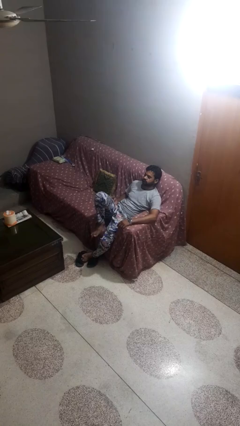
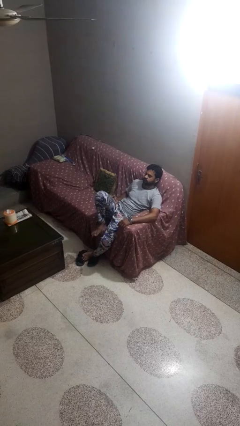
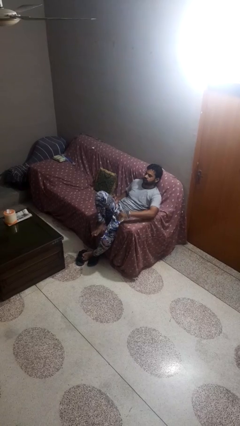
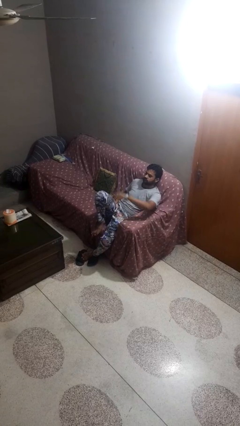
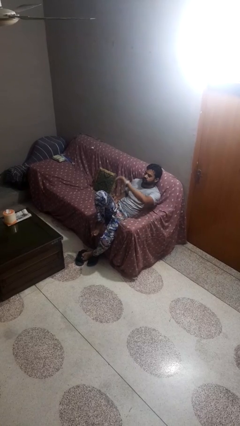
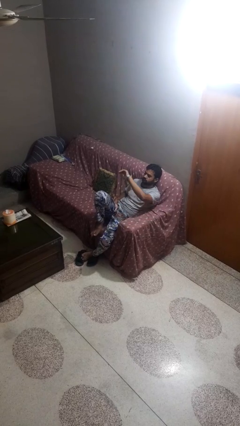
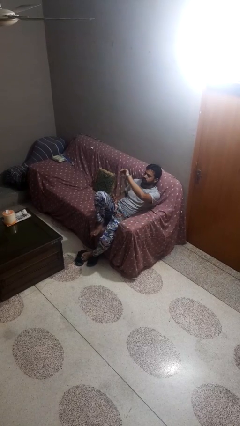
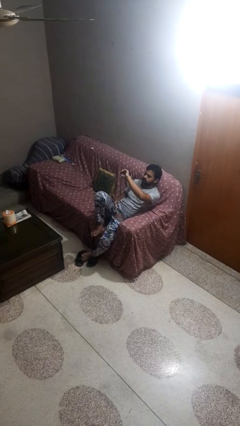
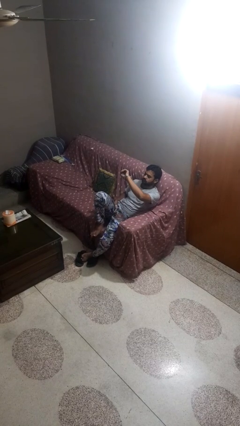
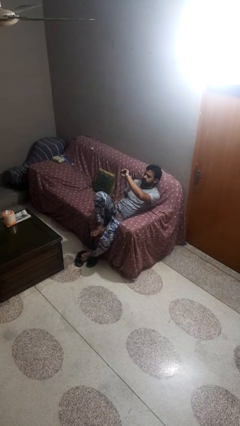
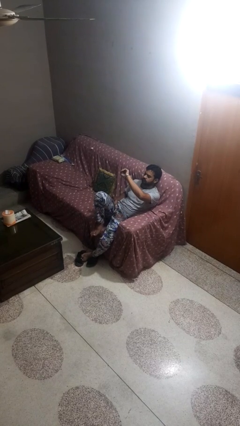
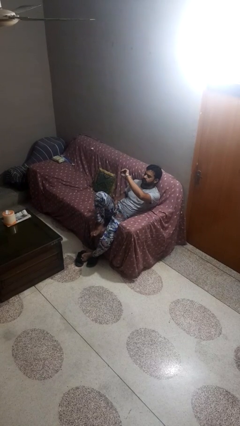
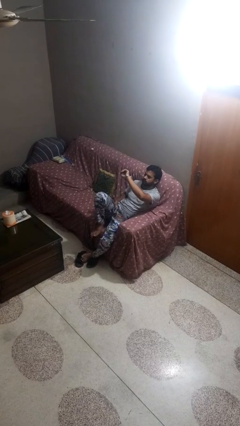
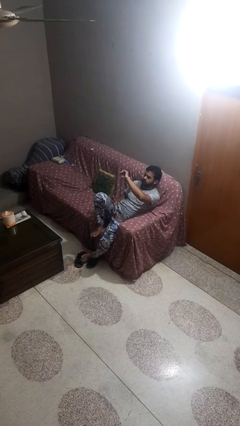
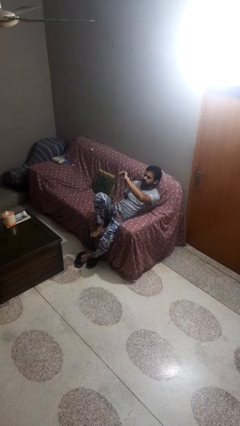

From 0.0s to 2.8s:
person looks at wristwatch

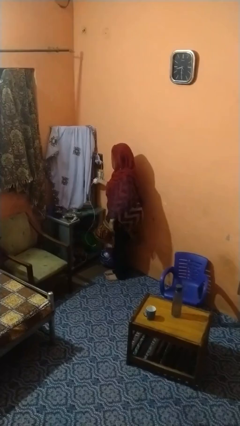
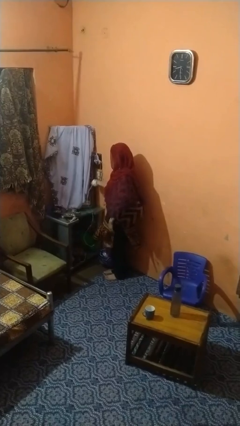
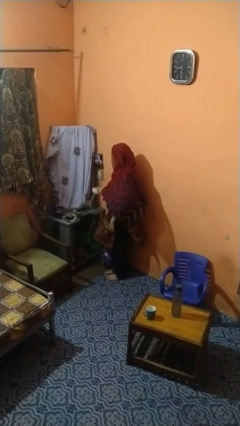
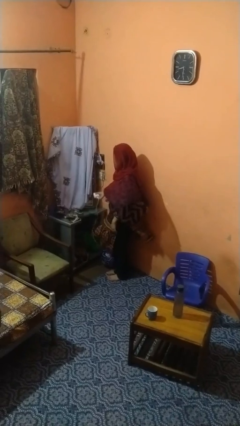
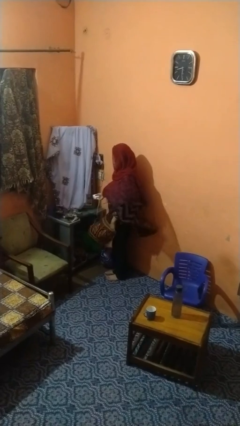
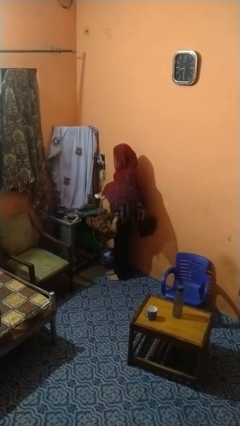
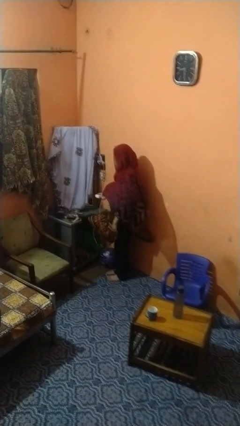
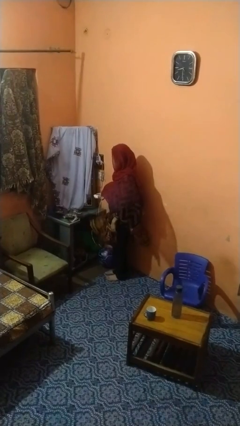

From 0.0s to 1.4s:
person unplugs from electrical socket

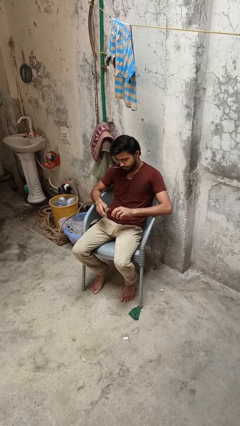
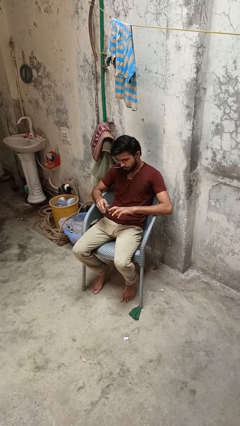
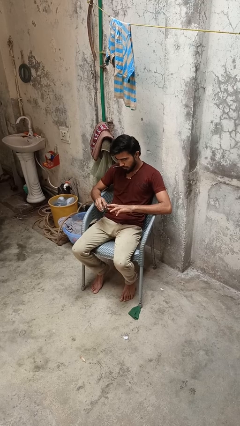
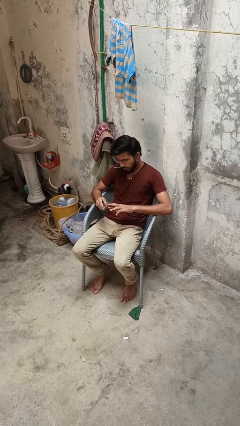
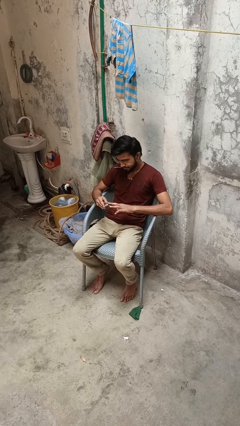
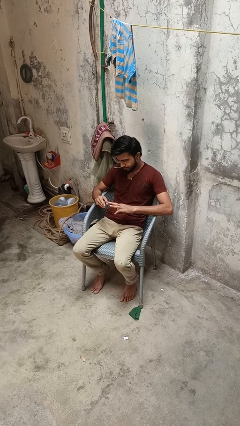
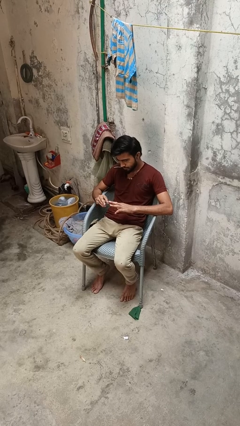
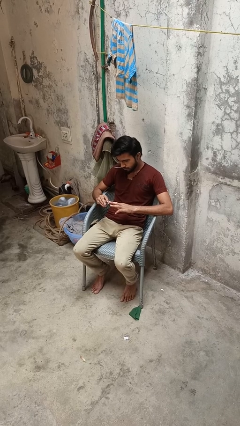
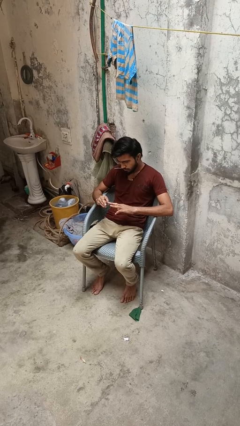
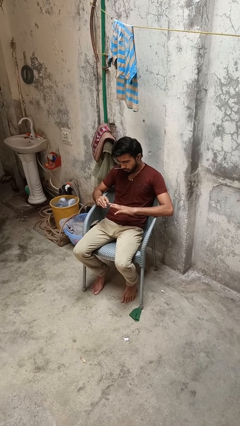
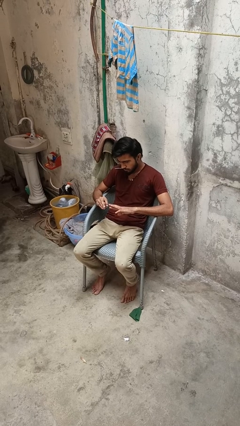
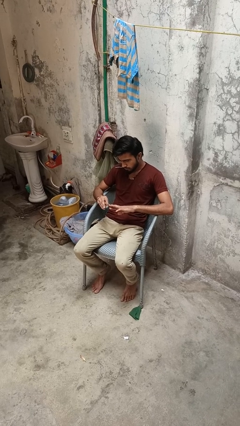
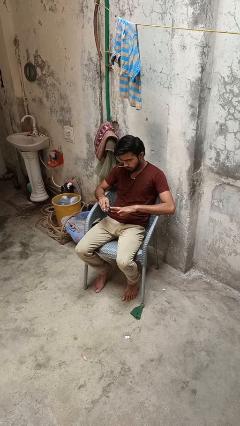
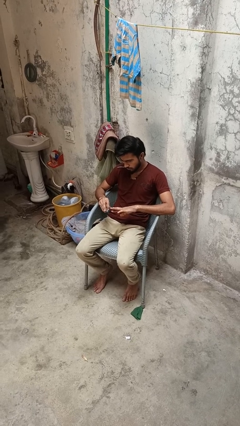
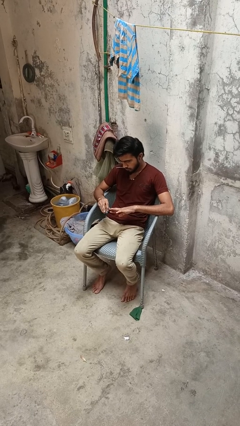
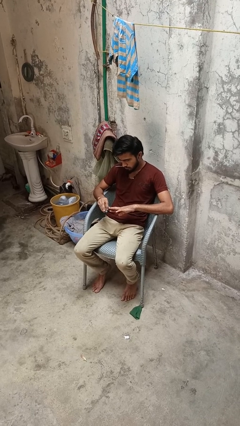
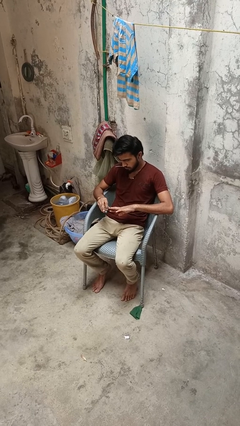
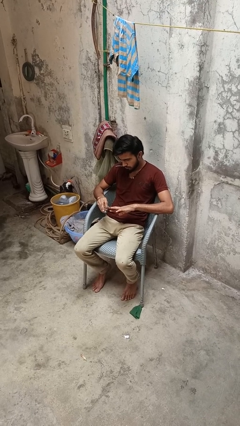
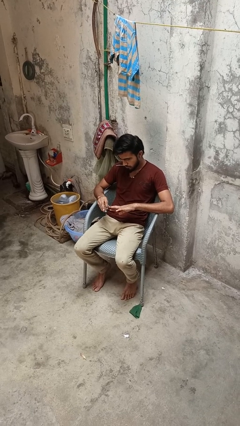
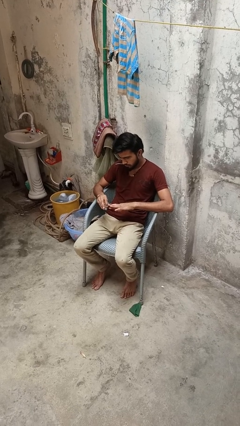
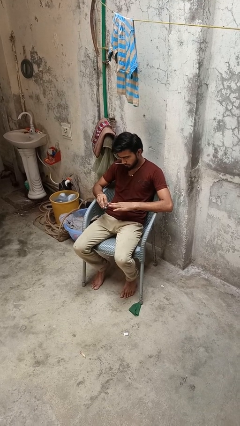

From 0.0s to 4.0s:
person files fingernails

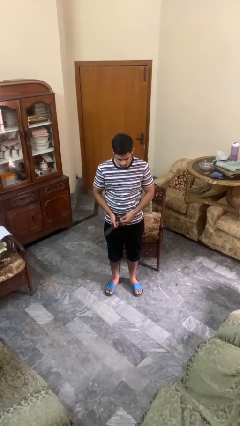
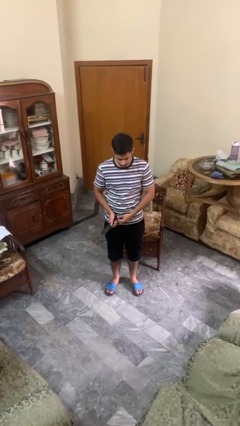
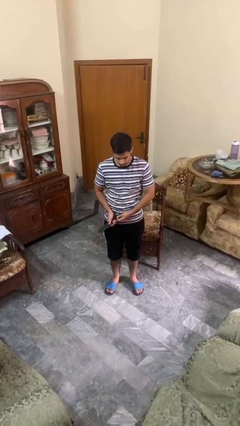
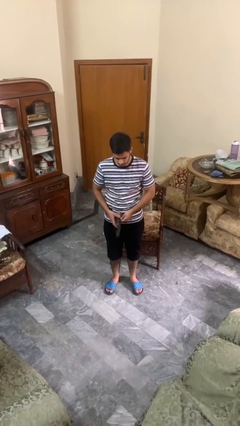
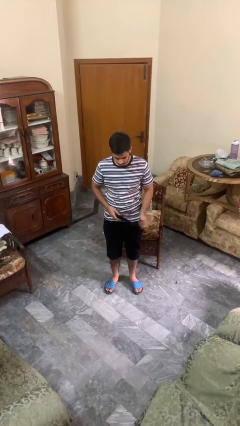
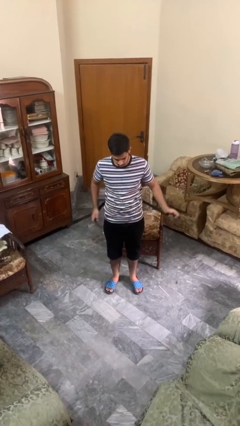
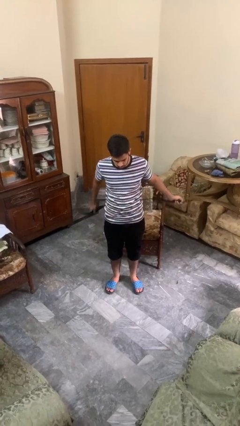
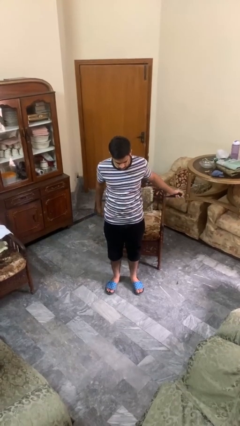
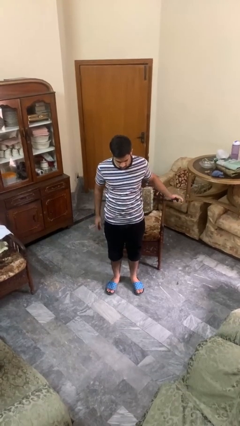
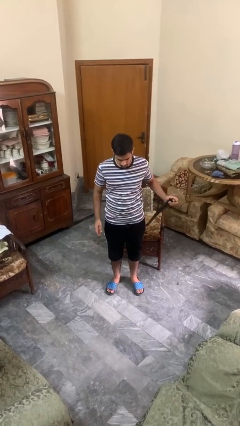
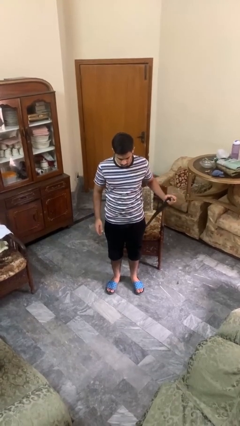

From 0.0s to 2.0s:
person takes off belt

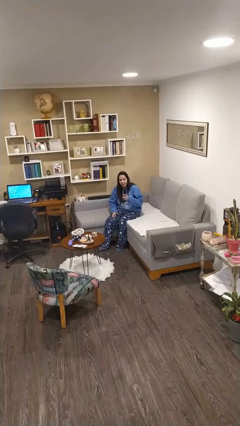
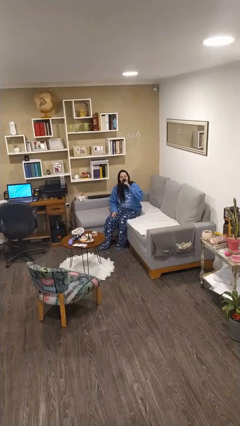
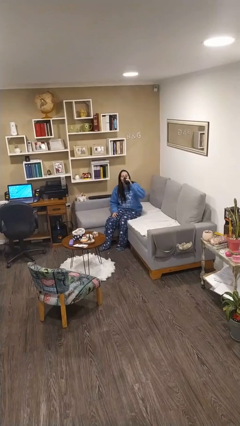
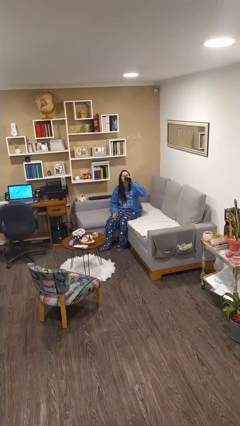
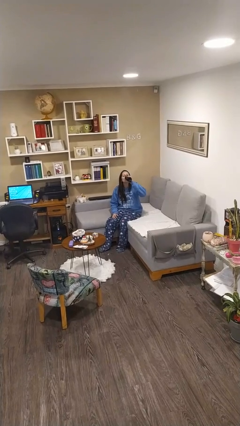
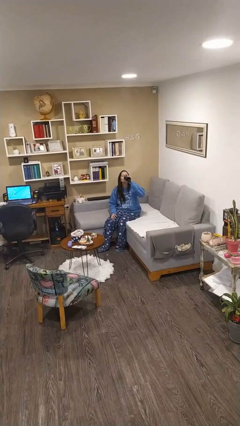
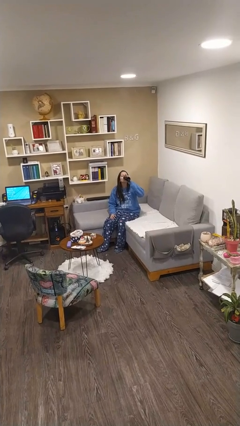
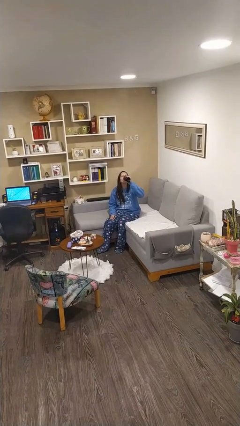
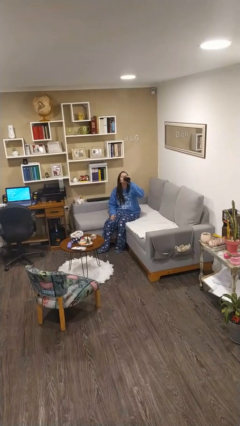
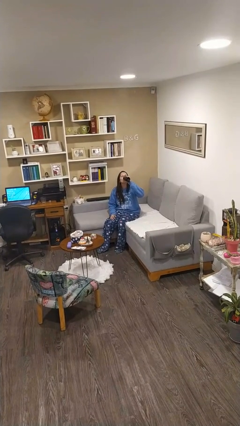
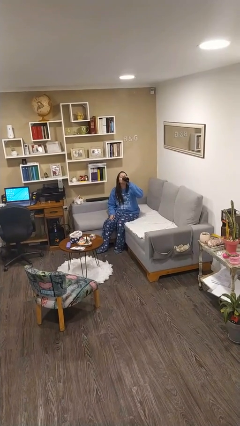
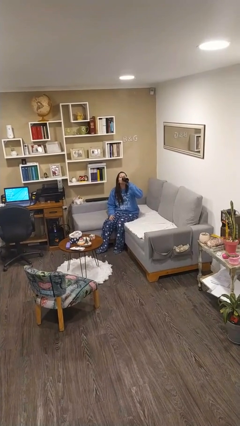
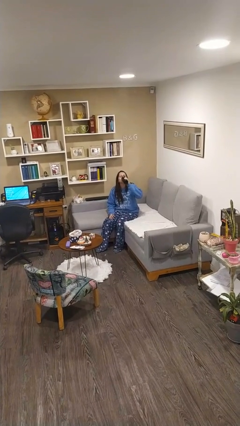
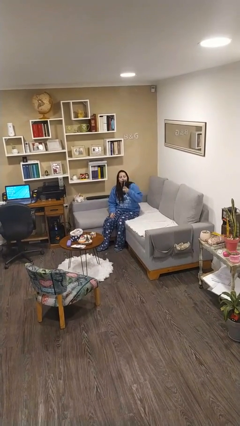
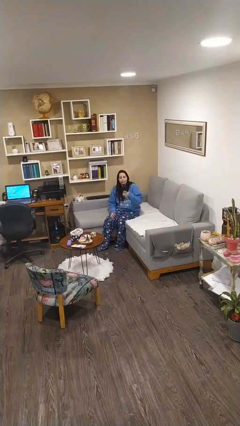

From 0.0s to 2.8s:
person drinks from bottle

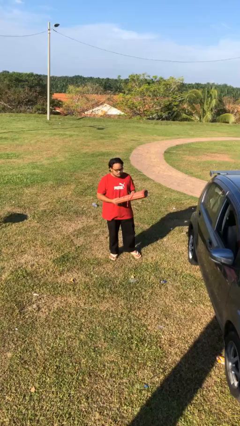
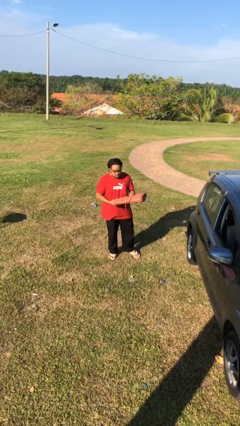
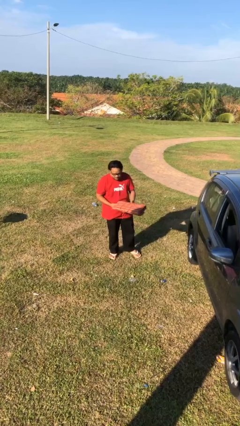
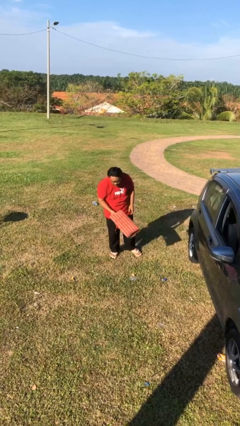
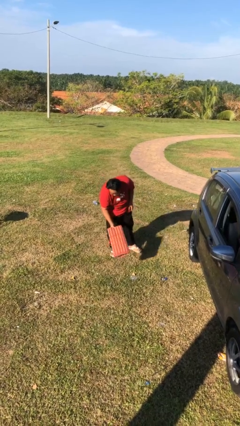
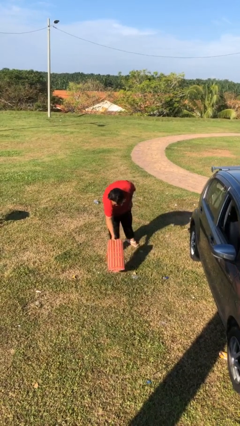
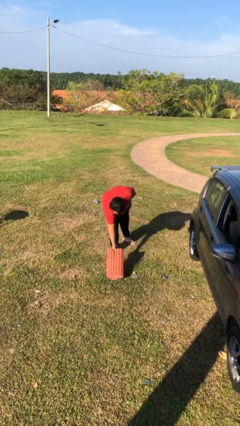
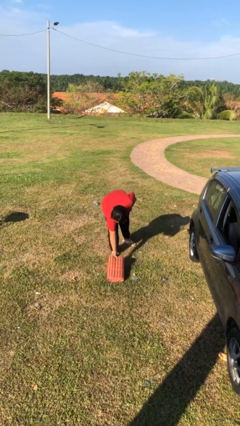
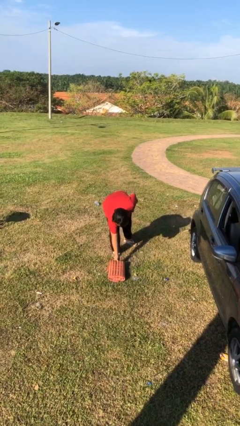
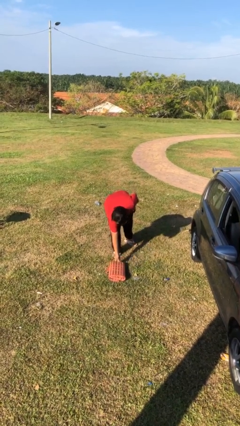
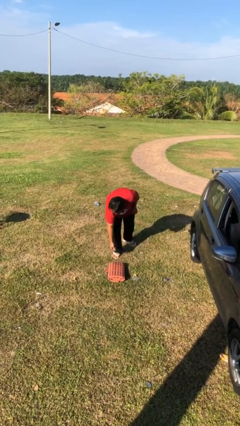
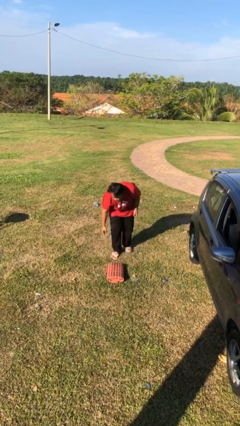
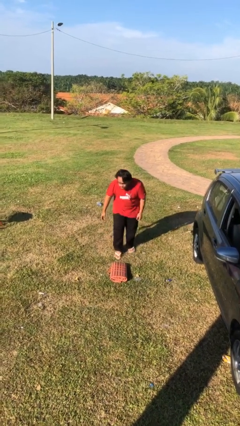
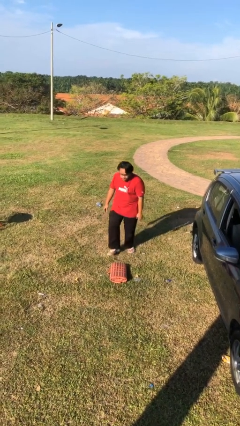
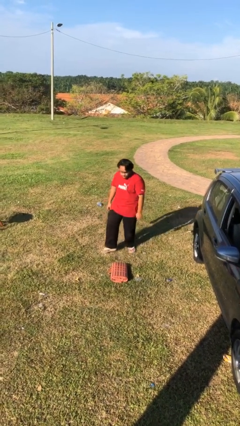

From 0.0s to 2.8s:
person puts down object on floor

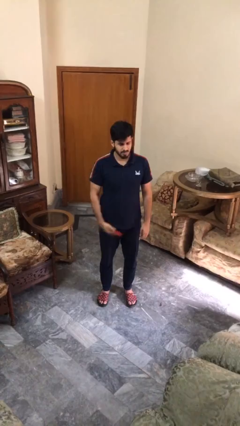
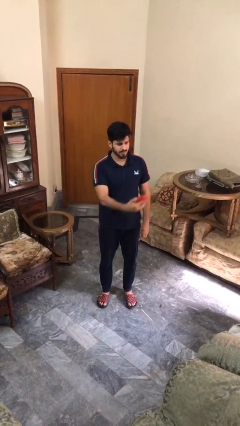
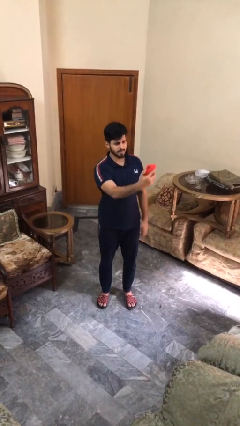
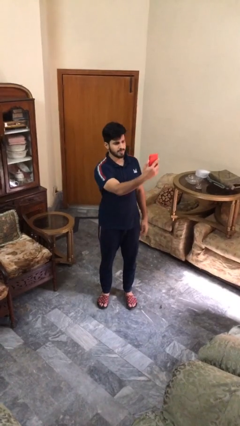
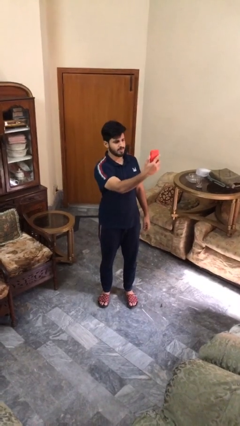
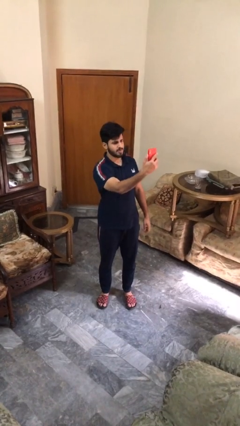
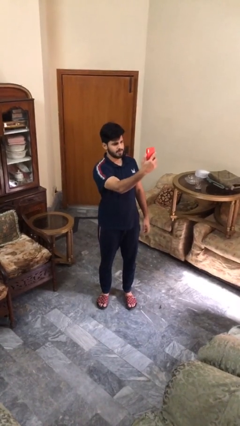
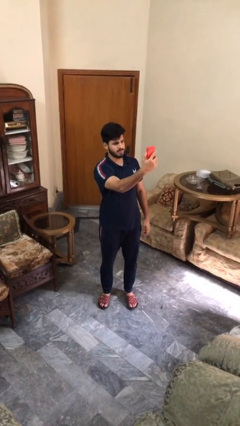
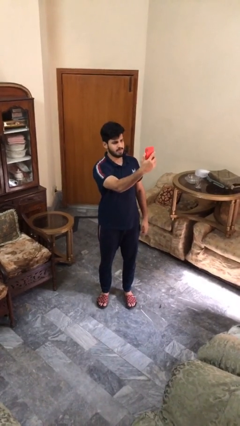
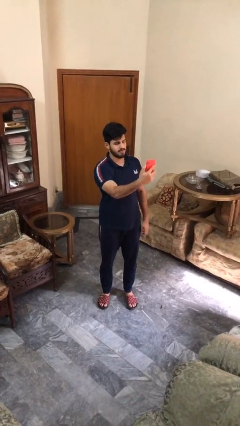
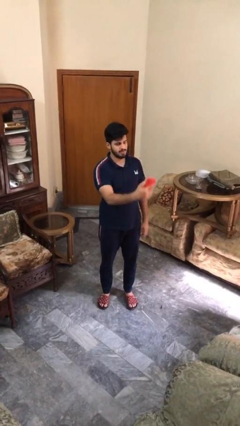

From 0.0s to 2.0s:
person takes selfie
